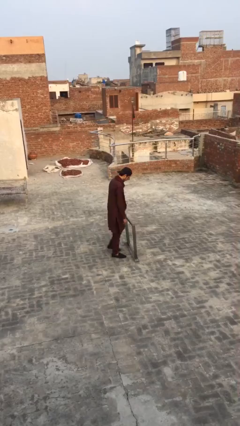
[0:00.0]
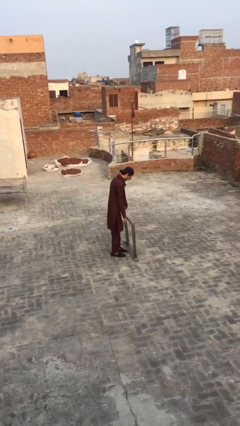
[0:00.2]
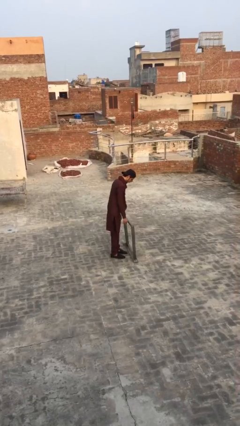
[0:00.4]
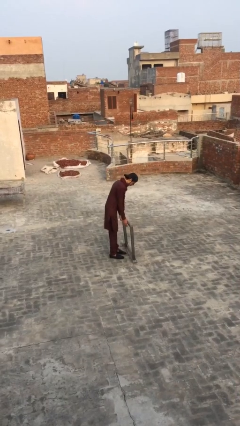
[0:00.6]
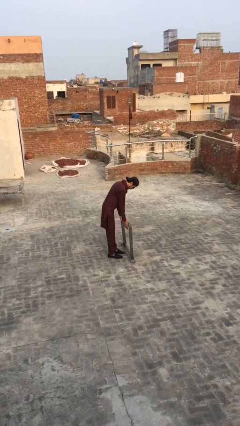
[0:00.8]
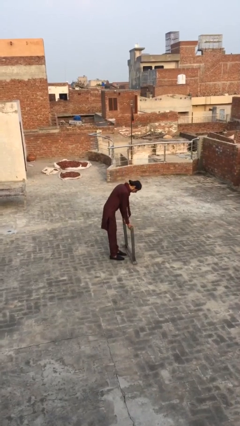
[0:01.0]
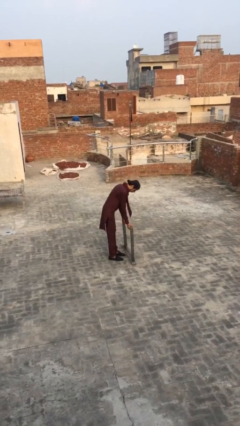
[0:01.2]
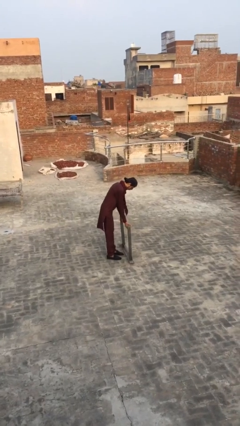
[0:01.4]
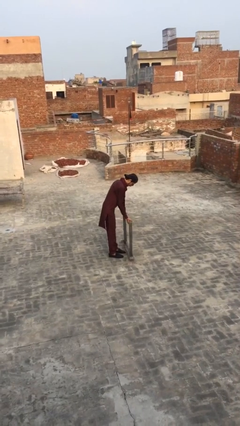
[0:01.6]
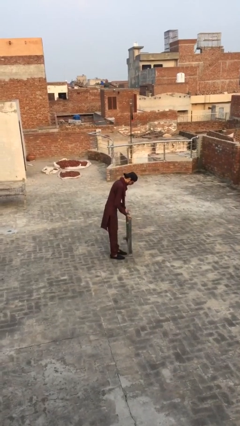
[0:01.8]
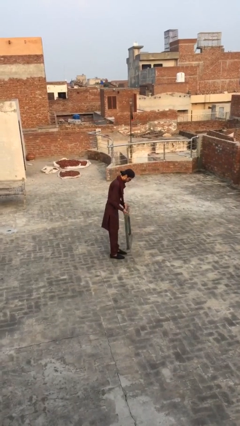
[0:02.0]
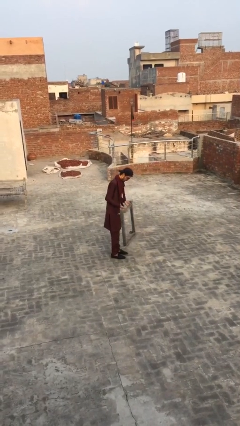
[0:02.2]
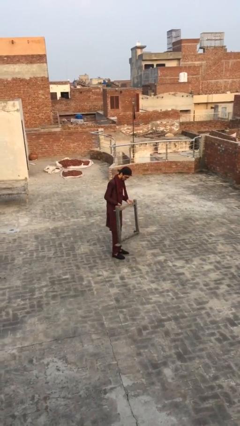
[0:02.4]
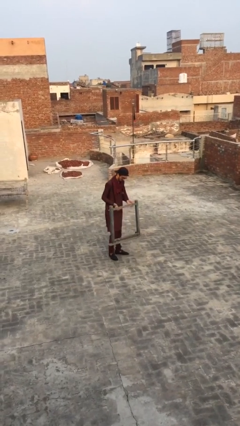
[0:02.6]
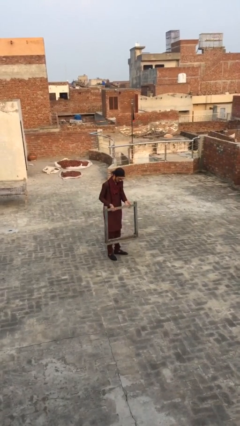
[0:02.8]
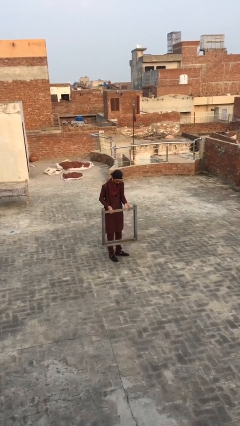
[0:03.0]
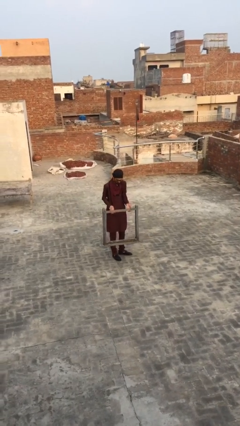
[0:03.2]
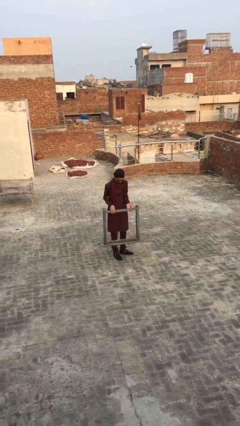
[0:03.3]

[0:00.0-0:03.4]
person picks up object from floor

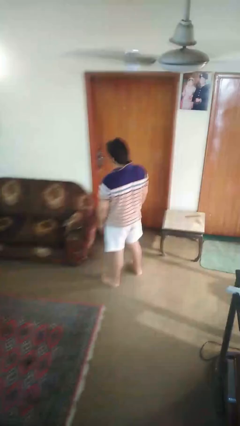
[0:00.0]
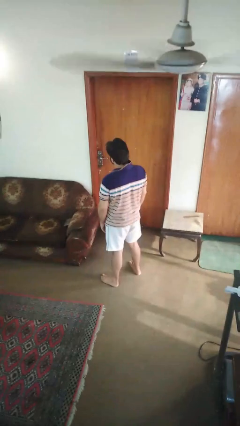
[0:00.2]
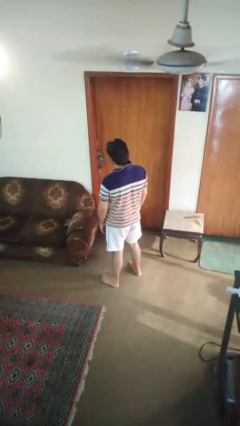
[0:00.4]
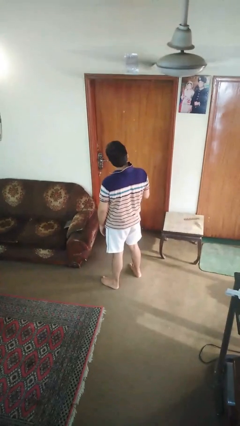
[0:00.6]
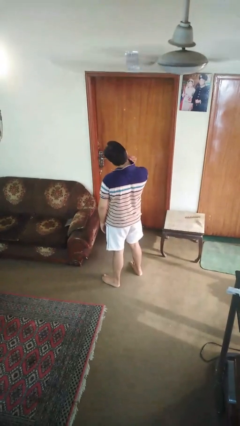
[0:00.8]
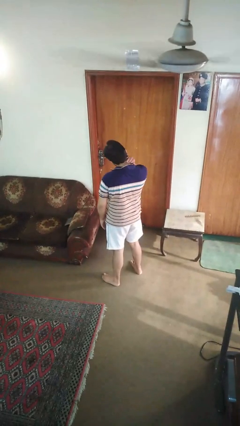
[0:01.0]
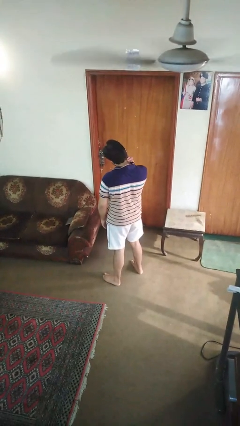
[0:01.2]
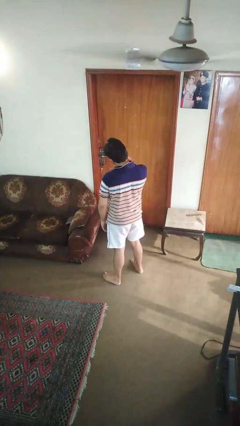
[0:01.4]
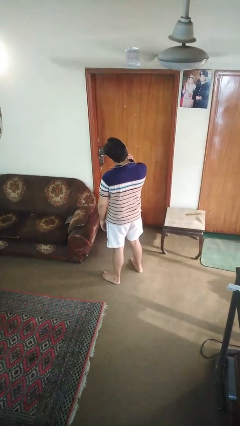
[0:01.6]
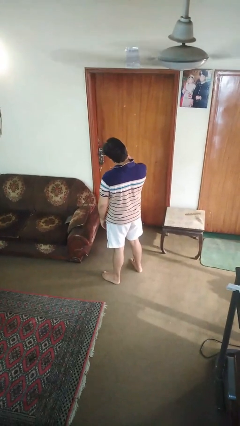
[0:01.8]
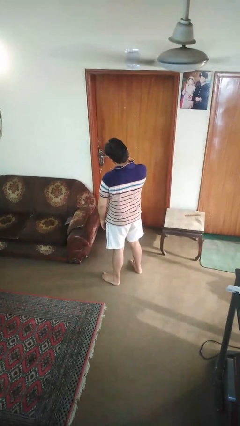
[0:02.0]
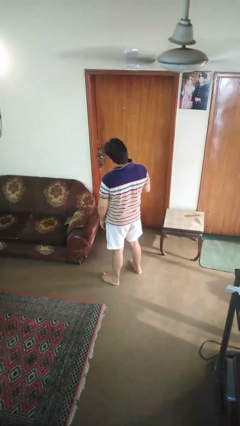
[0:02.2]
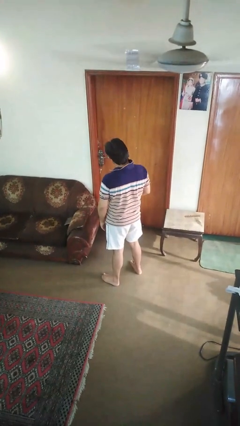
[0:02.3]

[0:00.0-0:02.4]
person rubs neck

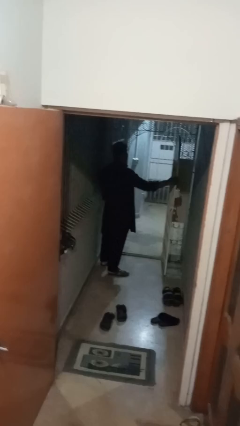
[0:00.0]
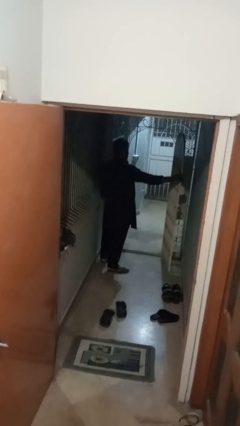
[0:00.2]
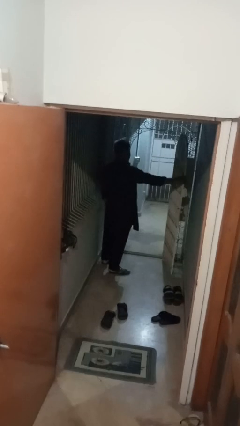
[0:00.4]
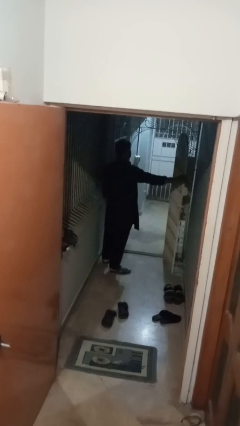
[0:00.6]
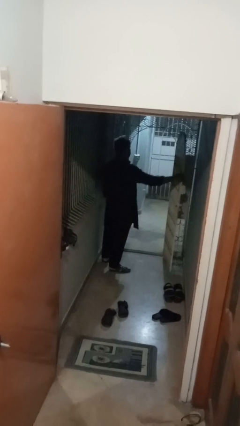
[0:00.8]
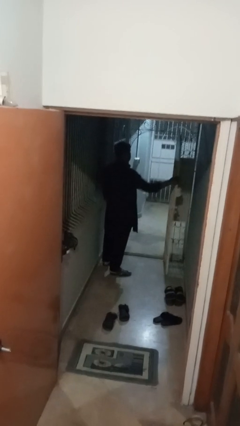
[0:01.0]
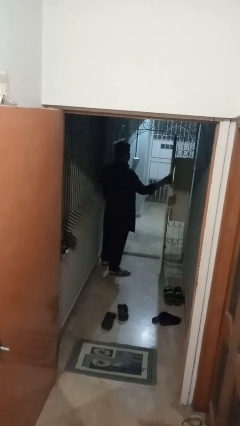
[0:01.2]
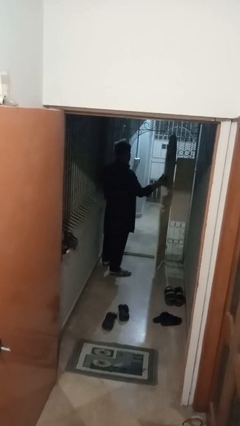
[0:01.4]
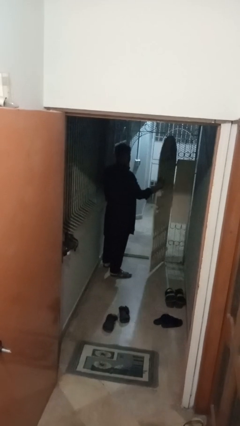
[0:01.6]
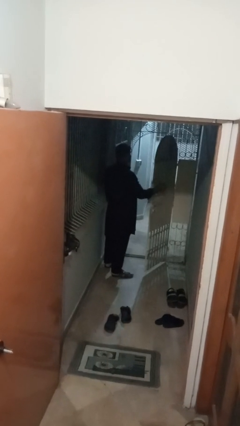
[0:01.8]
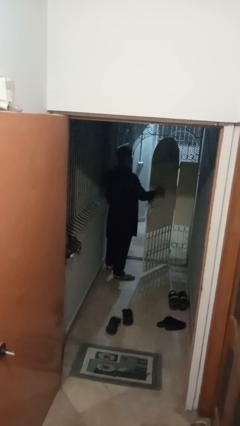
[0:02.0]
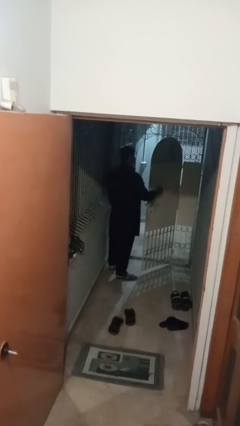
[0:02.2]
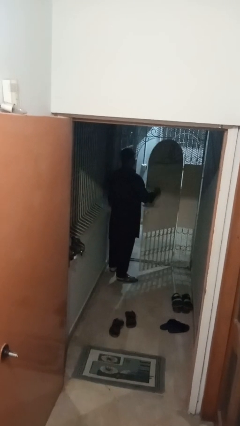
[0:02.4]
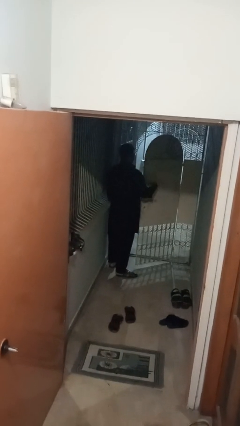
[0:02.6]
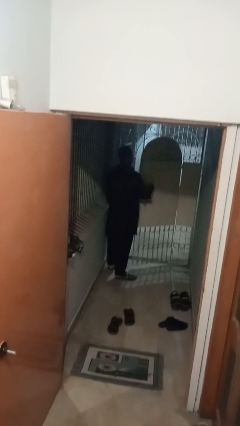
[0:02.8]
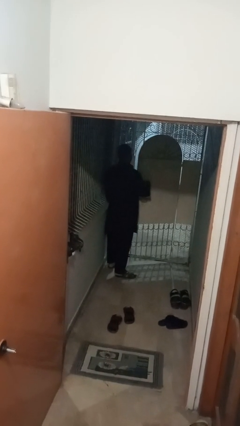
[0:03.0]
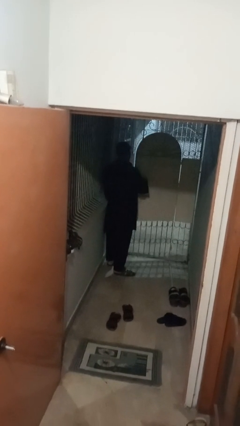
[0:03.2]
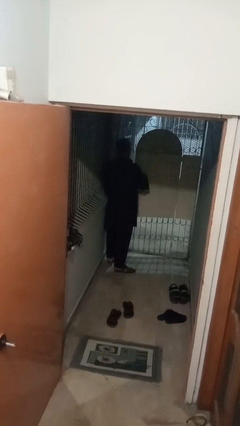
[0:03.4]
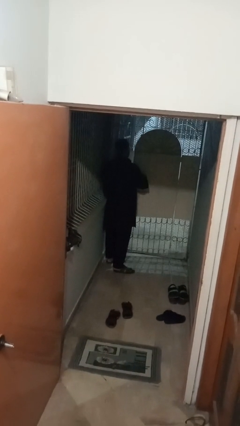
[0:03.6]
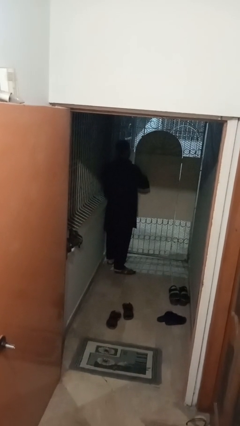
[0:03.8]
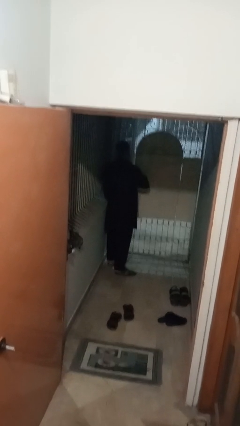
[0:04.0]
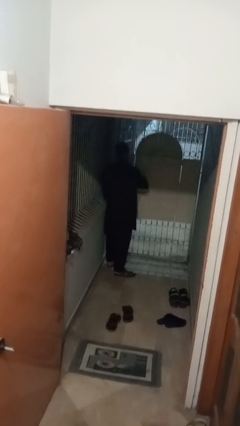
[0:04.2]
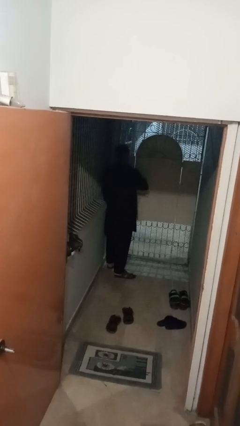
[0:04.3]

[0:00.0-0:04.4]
person closes gate

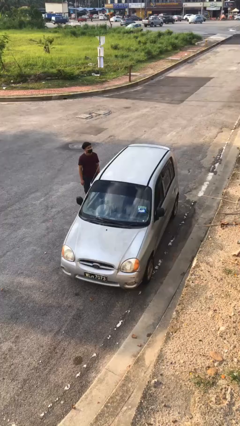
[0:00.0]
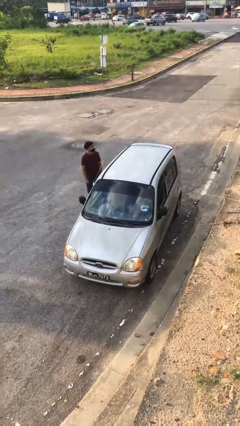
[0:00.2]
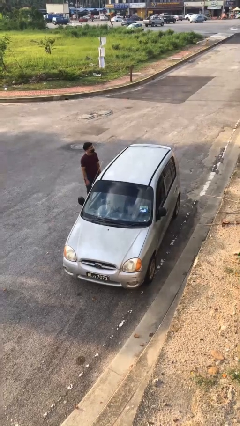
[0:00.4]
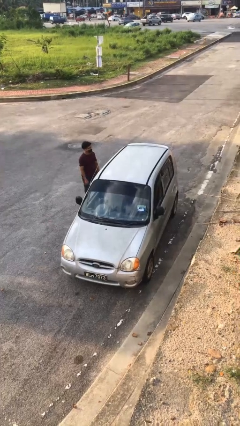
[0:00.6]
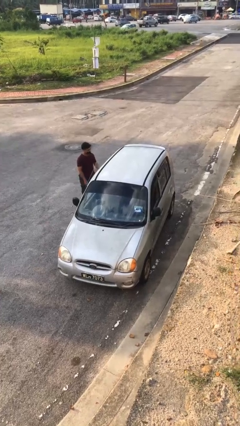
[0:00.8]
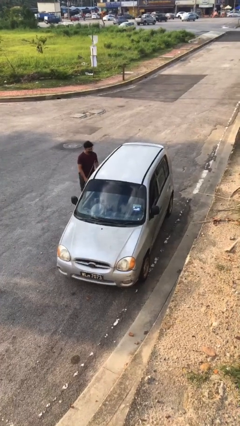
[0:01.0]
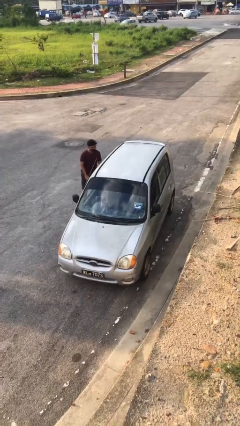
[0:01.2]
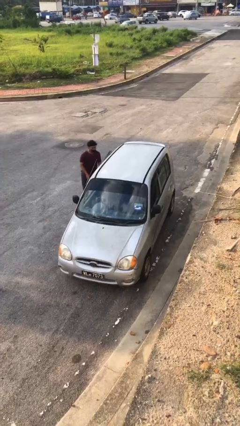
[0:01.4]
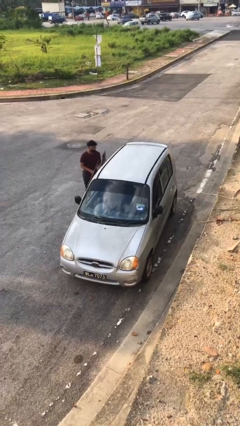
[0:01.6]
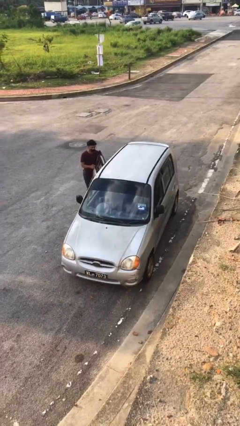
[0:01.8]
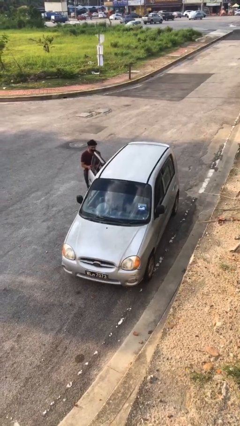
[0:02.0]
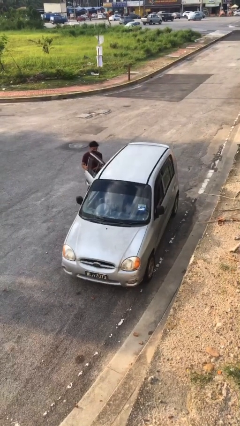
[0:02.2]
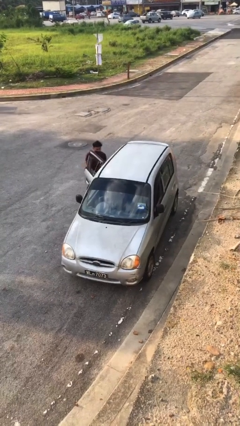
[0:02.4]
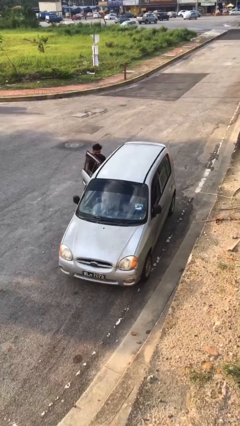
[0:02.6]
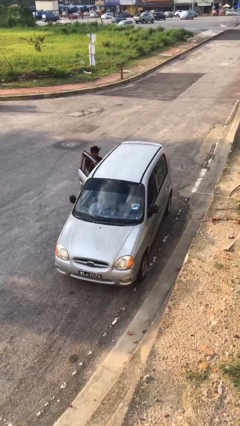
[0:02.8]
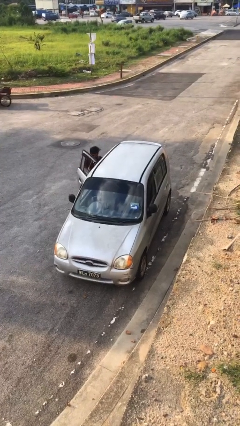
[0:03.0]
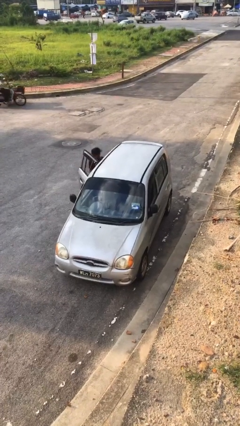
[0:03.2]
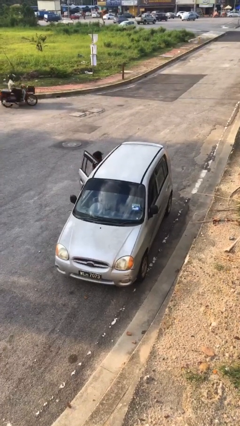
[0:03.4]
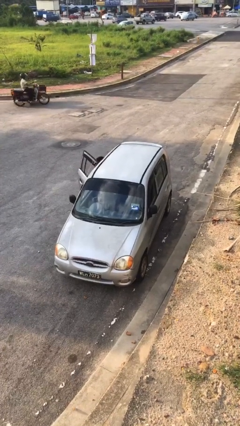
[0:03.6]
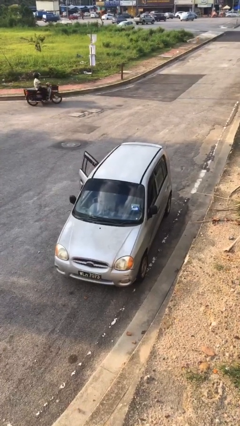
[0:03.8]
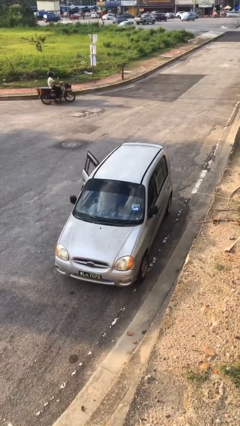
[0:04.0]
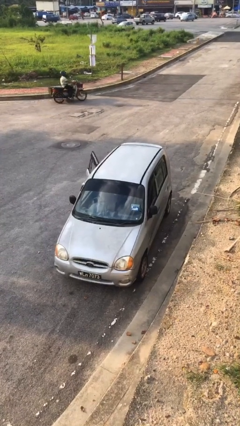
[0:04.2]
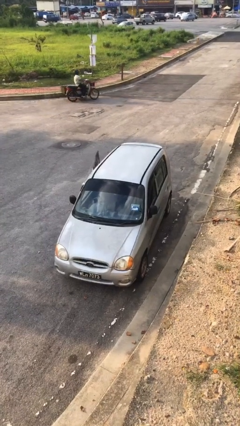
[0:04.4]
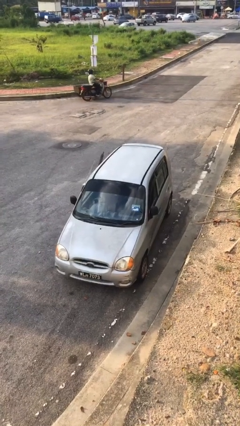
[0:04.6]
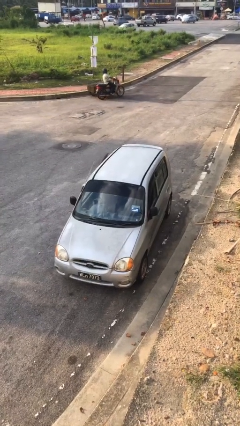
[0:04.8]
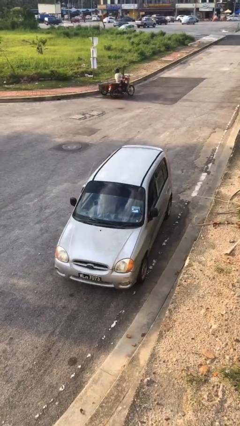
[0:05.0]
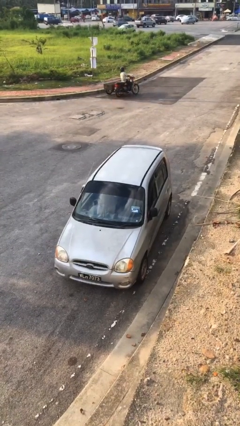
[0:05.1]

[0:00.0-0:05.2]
car picks up person

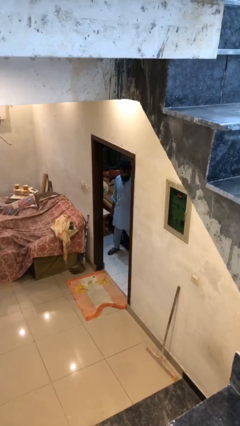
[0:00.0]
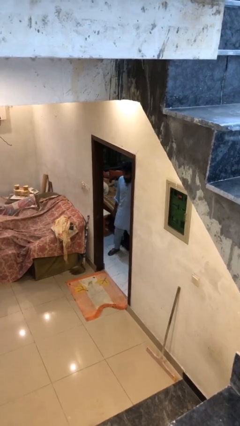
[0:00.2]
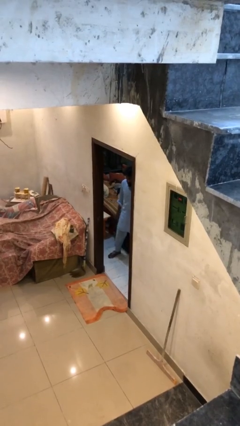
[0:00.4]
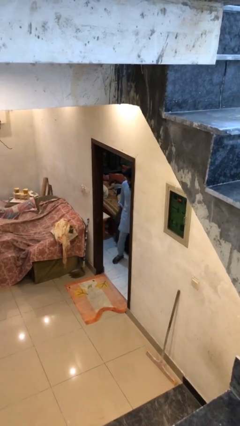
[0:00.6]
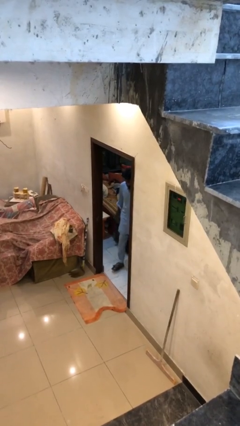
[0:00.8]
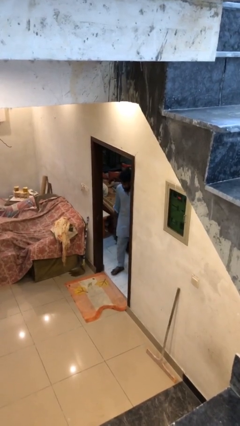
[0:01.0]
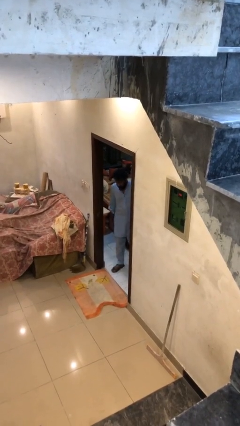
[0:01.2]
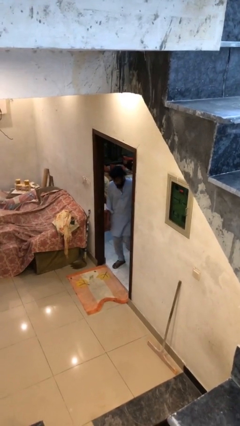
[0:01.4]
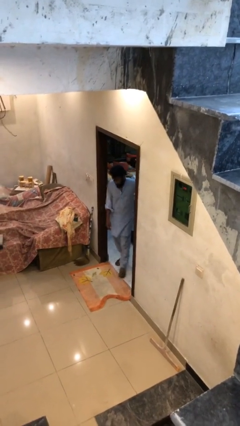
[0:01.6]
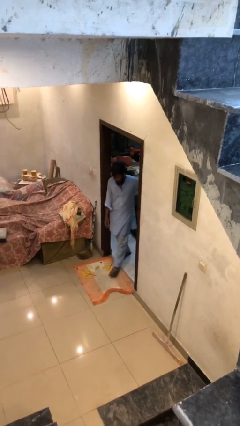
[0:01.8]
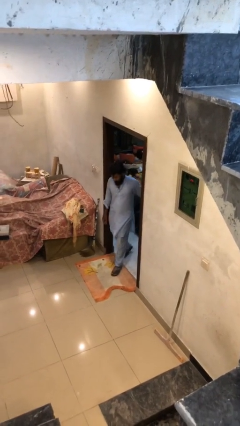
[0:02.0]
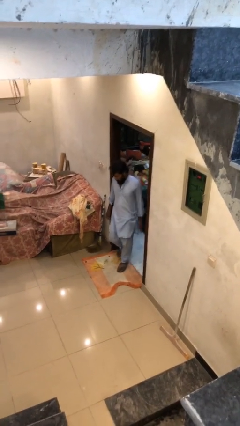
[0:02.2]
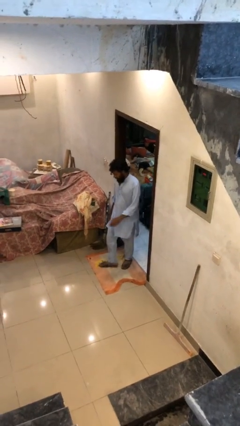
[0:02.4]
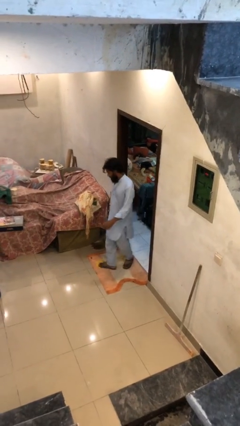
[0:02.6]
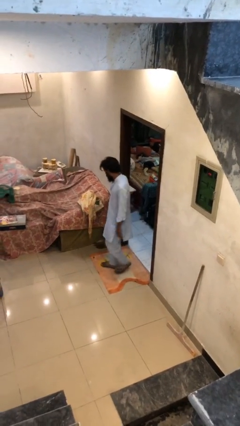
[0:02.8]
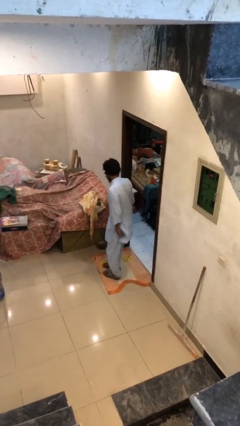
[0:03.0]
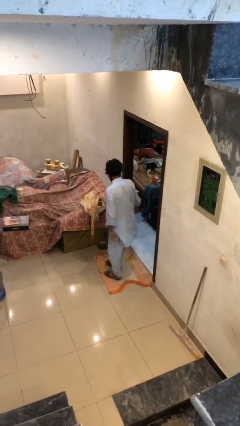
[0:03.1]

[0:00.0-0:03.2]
person enters scene through structure
